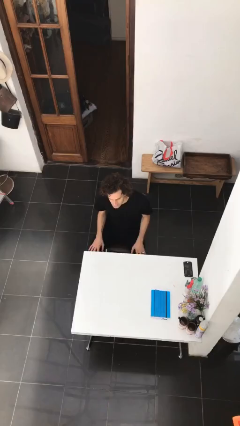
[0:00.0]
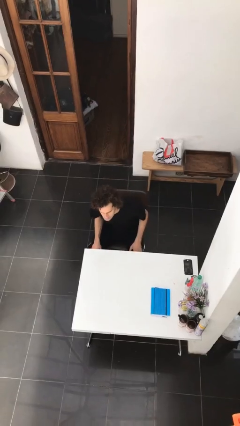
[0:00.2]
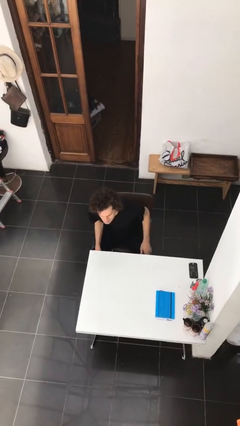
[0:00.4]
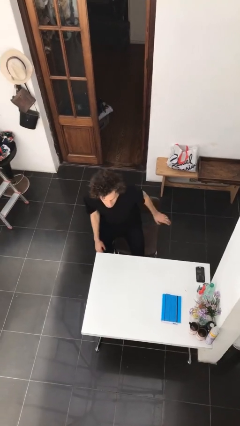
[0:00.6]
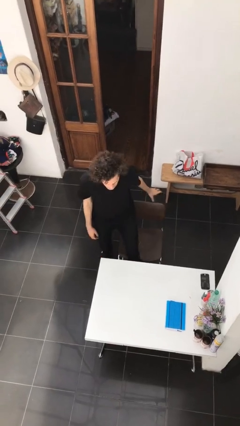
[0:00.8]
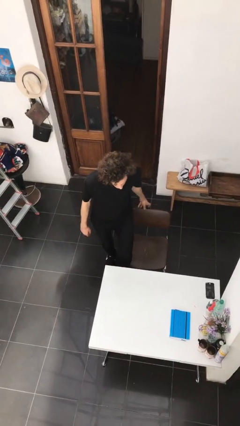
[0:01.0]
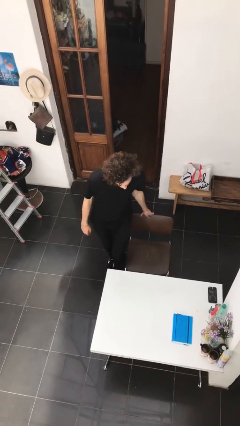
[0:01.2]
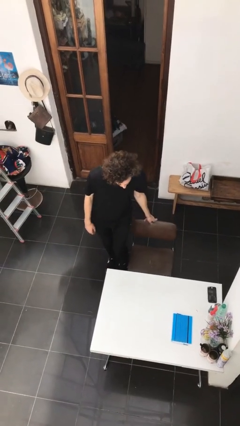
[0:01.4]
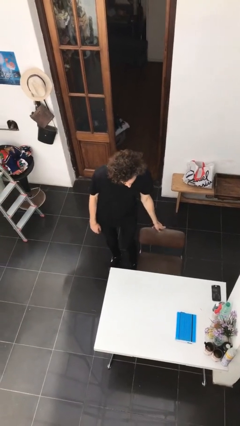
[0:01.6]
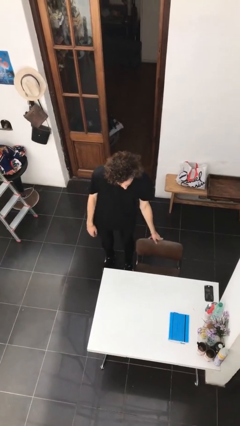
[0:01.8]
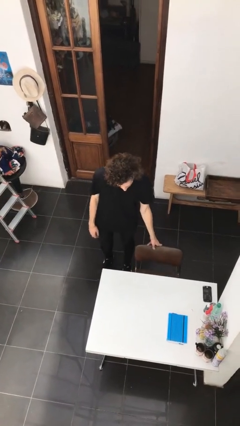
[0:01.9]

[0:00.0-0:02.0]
person stands up

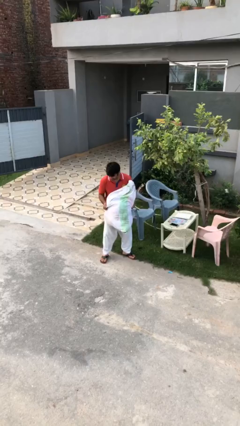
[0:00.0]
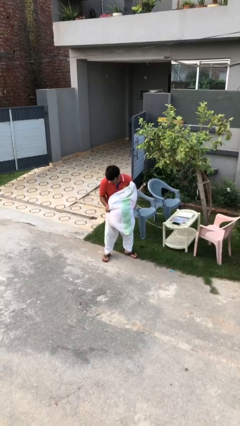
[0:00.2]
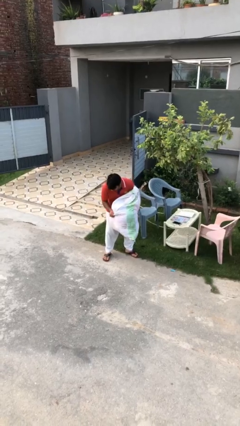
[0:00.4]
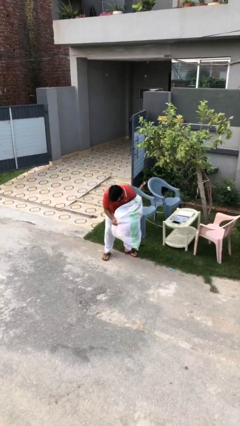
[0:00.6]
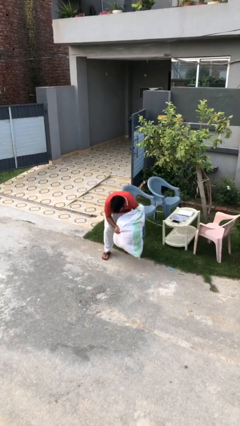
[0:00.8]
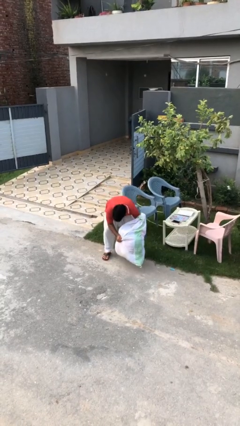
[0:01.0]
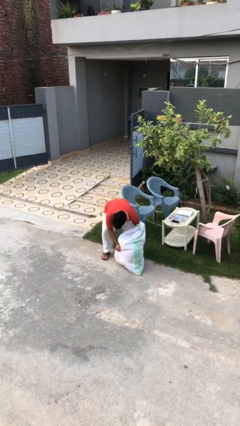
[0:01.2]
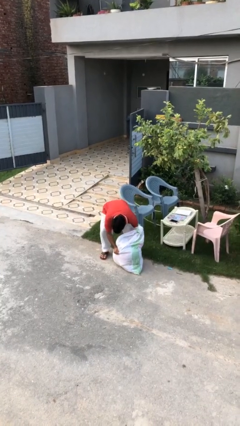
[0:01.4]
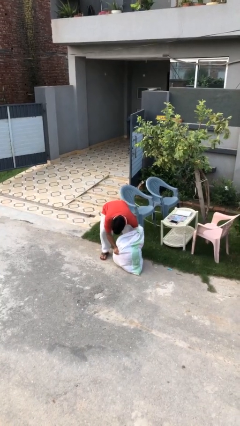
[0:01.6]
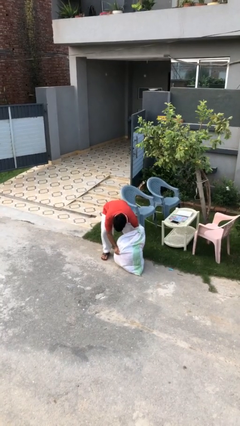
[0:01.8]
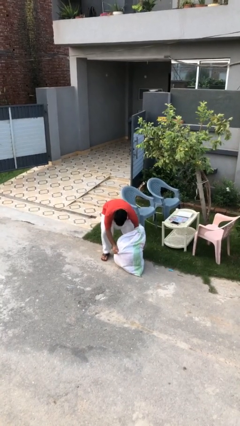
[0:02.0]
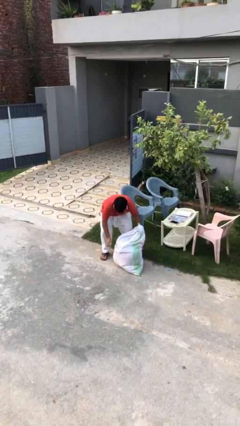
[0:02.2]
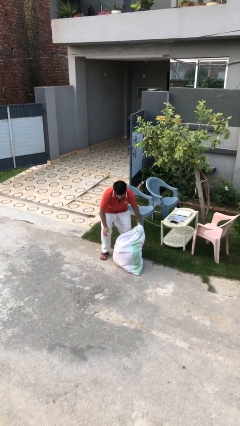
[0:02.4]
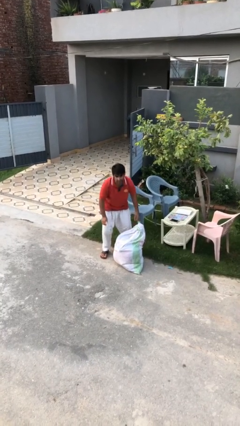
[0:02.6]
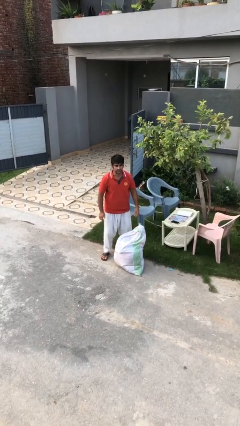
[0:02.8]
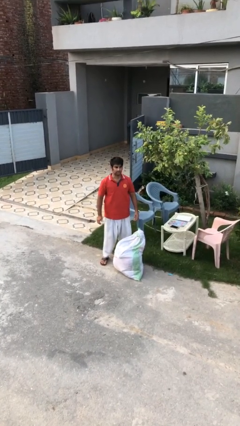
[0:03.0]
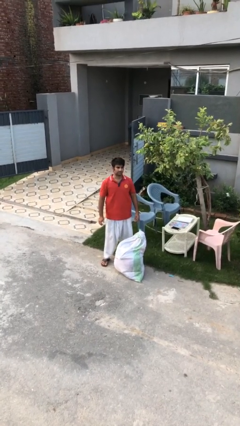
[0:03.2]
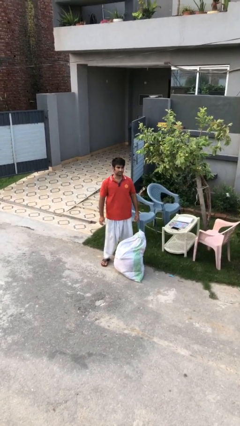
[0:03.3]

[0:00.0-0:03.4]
person puts down object on floor

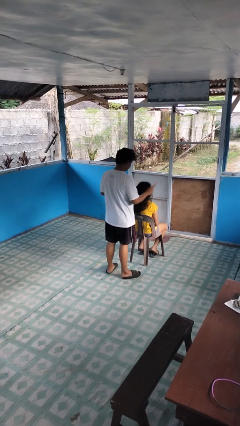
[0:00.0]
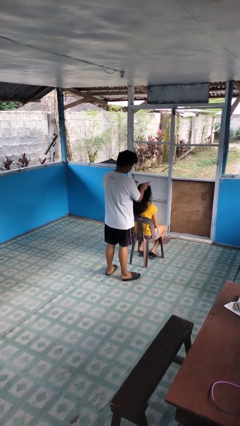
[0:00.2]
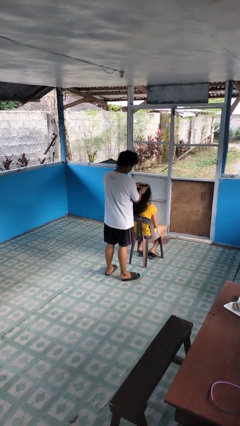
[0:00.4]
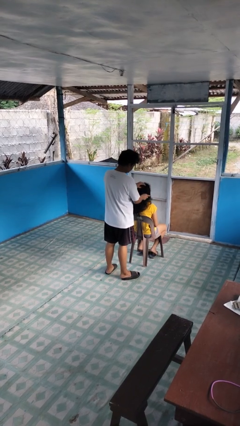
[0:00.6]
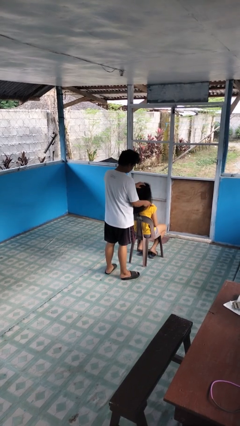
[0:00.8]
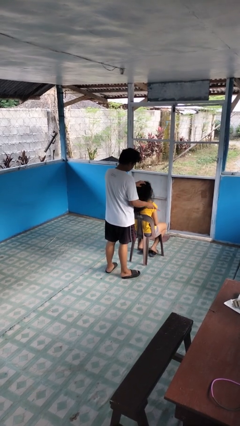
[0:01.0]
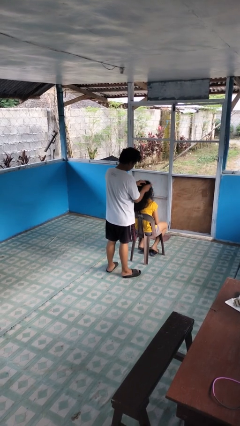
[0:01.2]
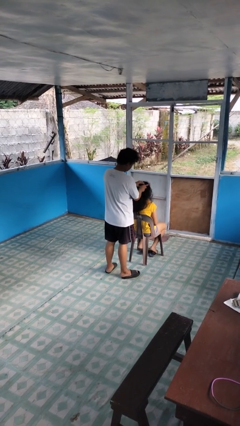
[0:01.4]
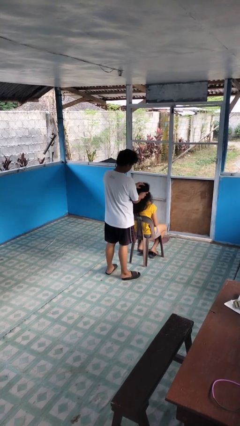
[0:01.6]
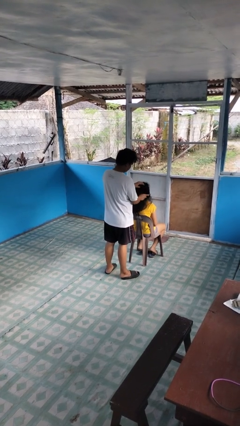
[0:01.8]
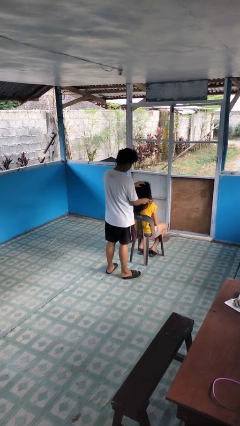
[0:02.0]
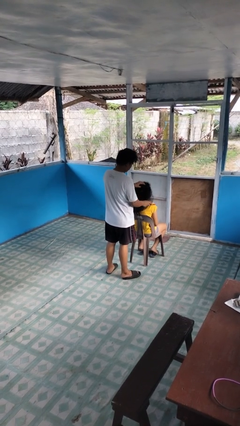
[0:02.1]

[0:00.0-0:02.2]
person brushes hair of person

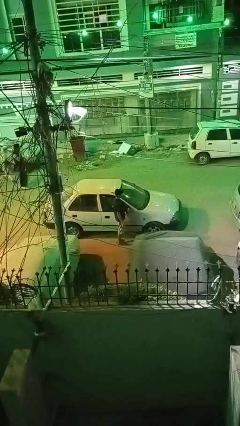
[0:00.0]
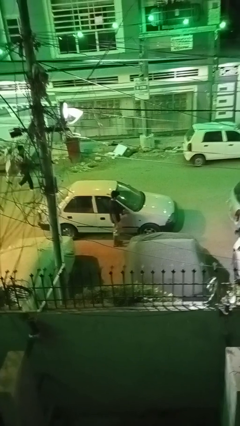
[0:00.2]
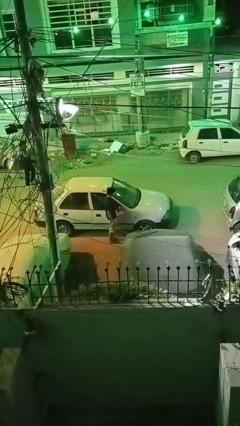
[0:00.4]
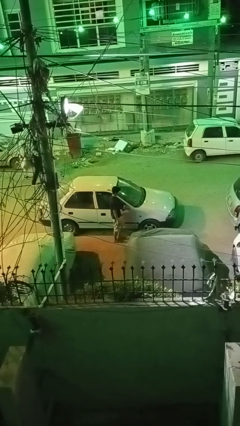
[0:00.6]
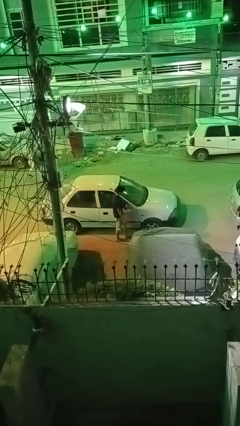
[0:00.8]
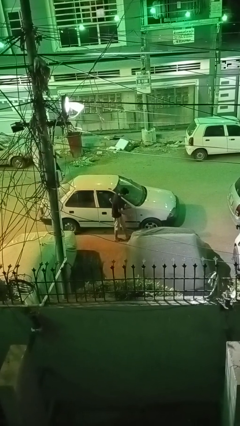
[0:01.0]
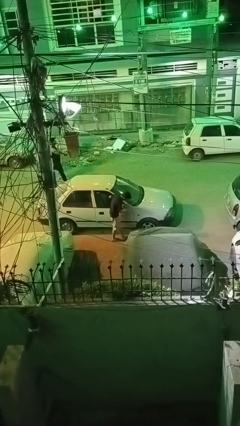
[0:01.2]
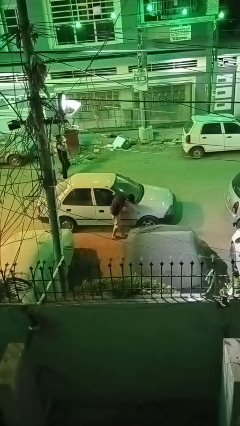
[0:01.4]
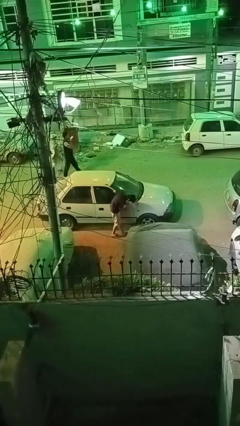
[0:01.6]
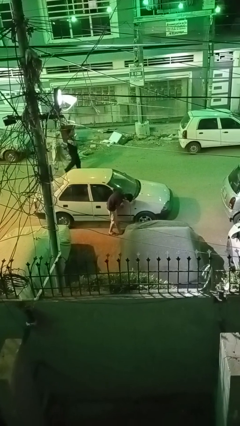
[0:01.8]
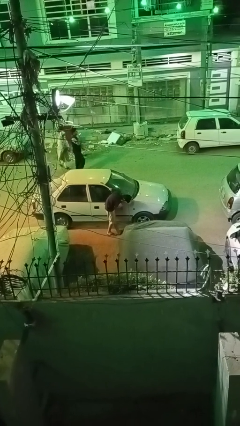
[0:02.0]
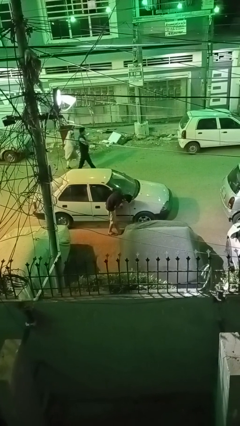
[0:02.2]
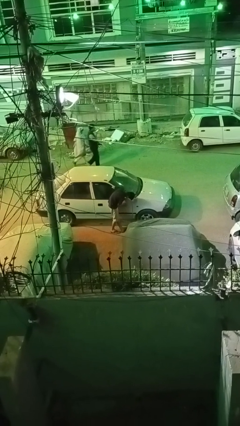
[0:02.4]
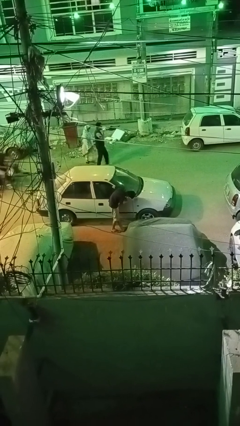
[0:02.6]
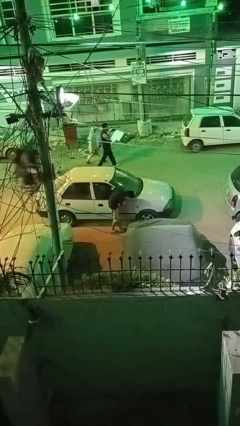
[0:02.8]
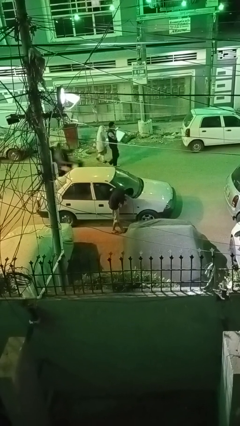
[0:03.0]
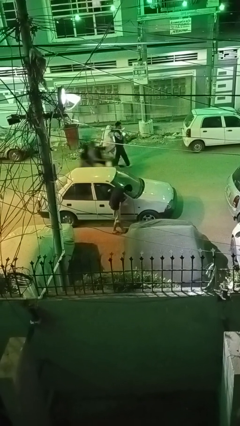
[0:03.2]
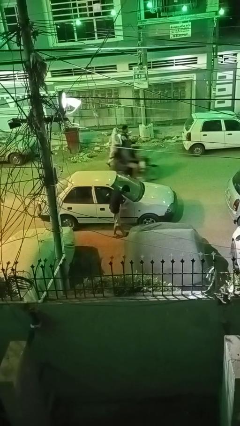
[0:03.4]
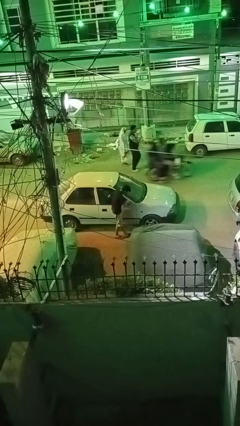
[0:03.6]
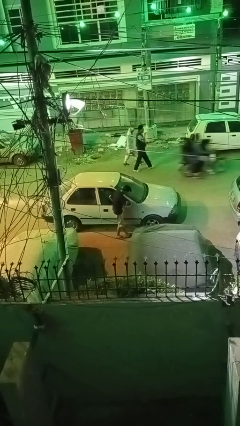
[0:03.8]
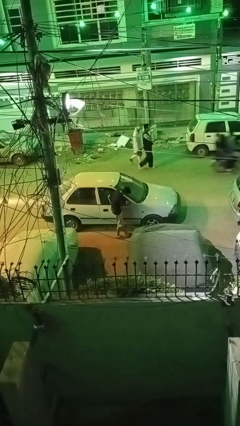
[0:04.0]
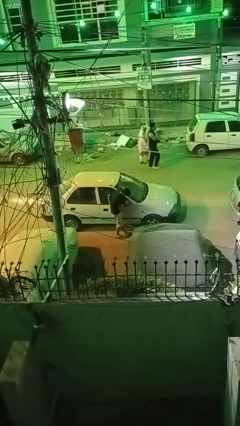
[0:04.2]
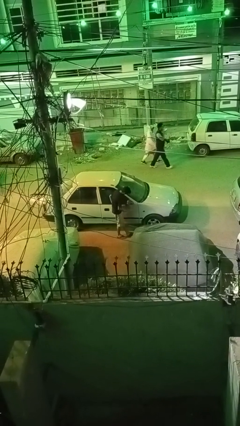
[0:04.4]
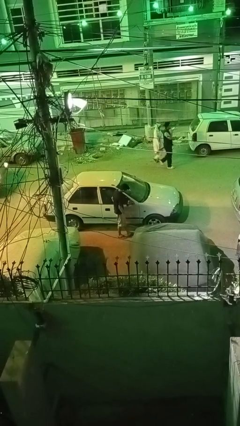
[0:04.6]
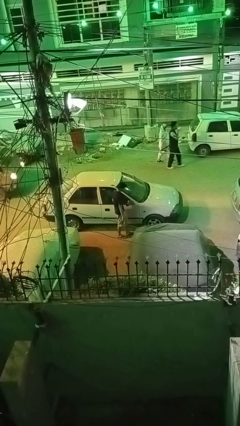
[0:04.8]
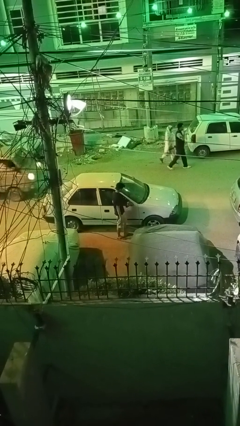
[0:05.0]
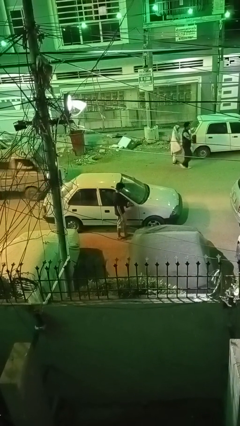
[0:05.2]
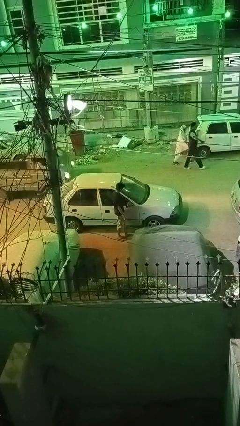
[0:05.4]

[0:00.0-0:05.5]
person polishes car with rag

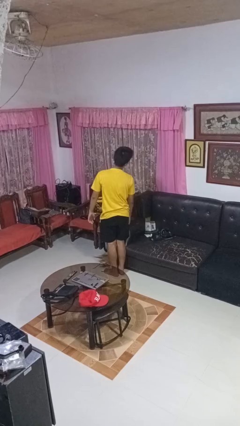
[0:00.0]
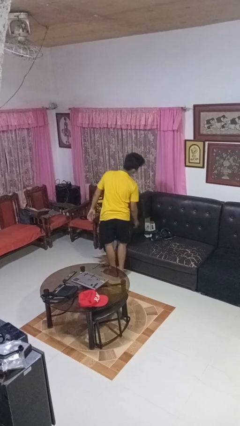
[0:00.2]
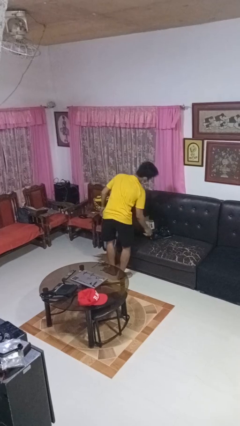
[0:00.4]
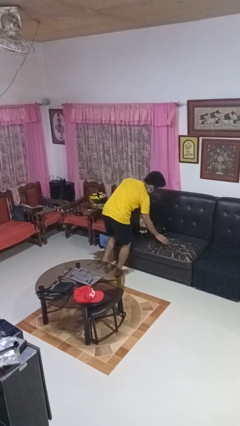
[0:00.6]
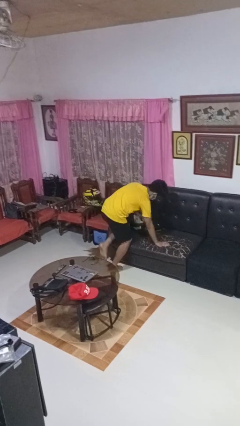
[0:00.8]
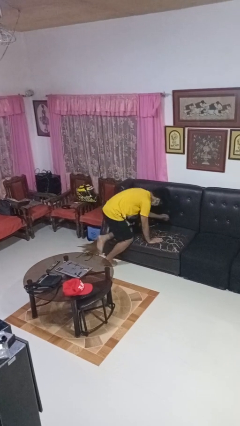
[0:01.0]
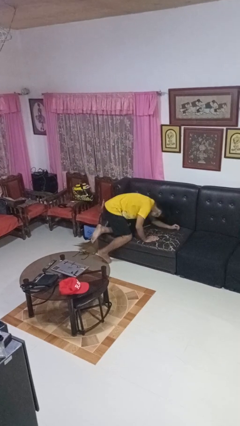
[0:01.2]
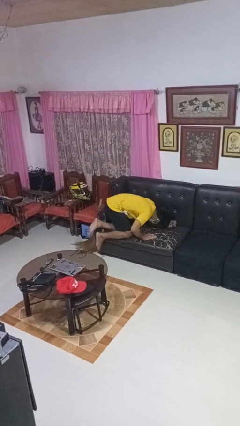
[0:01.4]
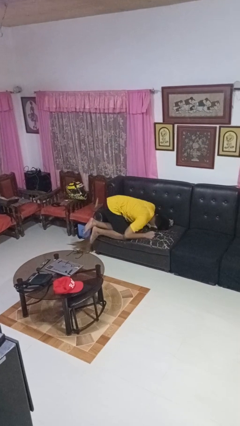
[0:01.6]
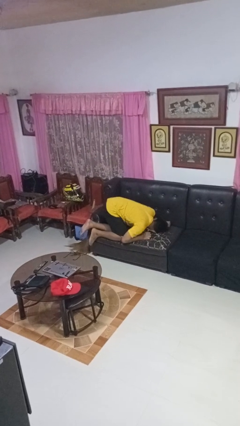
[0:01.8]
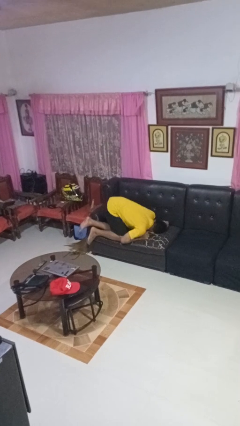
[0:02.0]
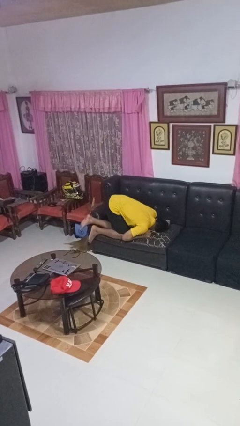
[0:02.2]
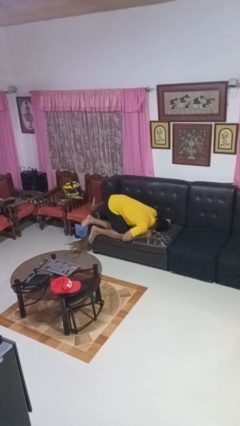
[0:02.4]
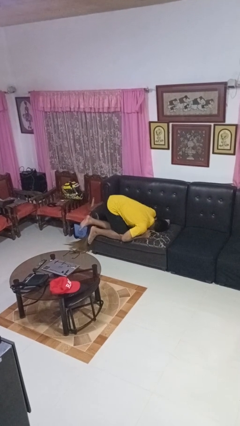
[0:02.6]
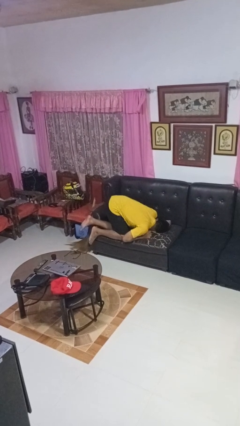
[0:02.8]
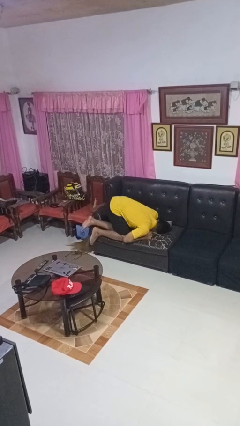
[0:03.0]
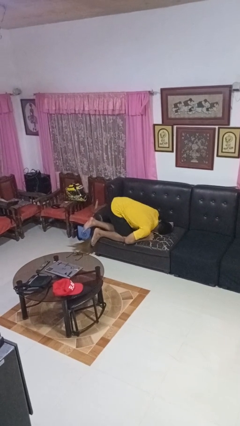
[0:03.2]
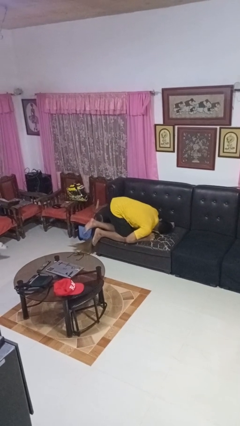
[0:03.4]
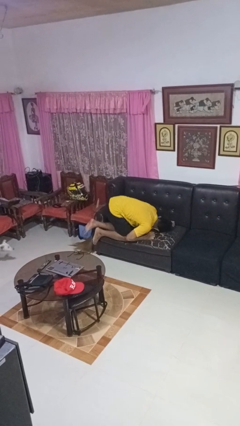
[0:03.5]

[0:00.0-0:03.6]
person lies down on couch

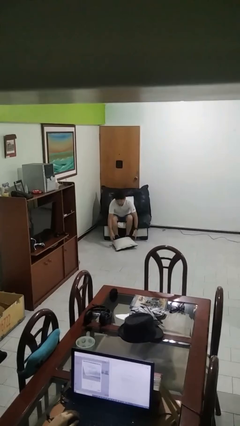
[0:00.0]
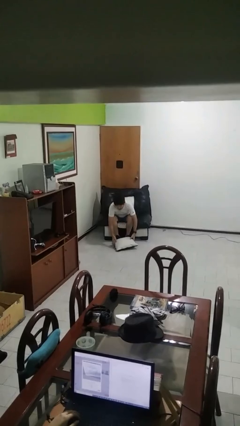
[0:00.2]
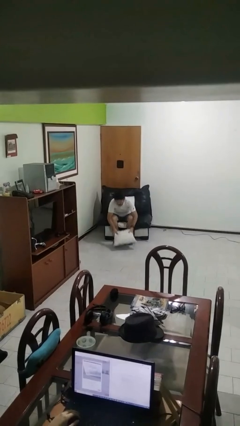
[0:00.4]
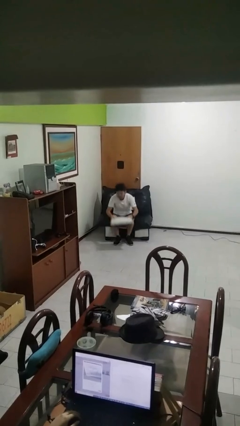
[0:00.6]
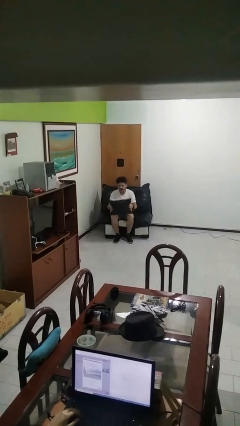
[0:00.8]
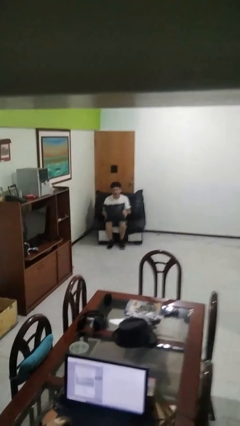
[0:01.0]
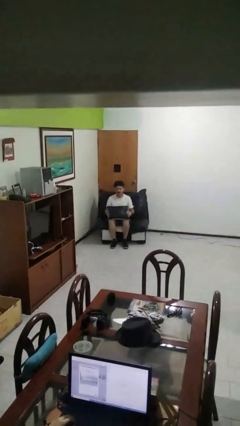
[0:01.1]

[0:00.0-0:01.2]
person picks up object from floor
